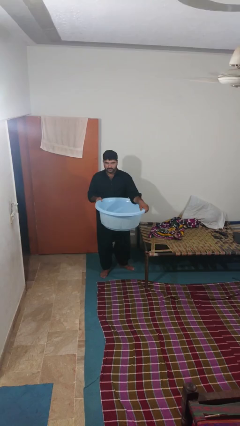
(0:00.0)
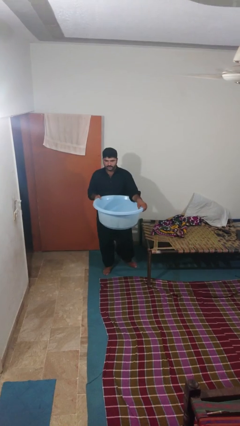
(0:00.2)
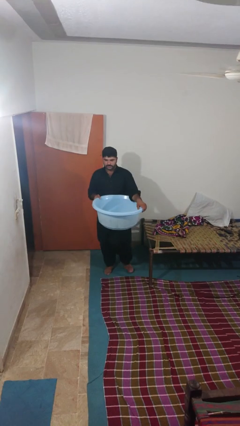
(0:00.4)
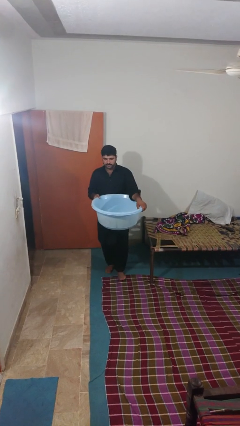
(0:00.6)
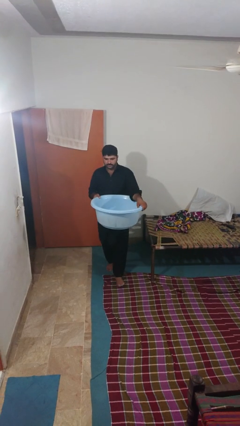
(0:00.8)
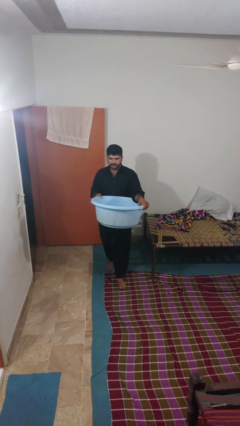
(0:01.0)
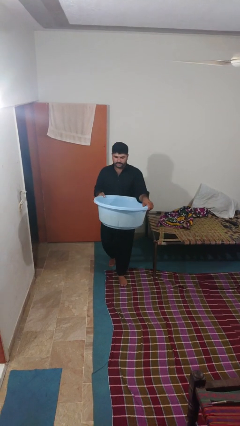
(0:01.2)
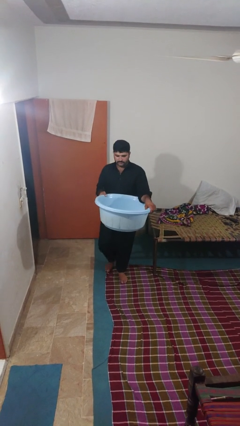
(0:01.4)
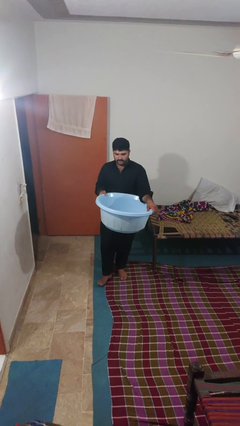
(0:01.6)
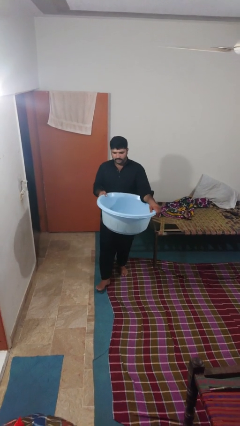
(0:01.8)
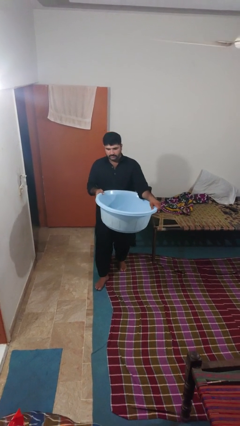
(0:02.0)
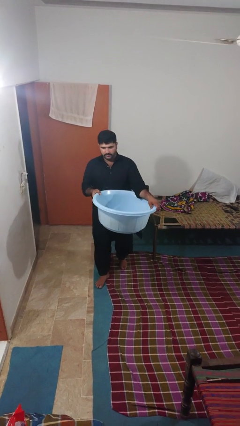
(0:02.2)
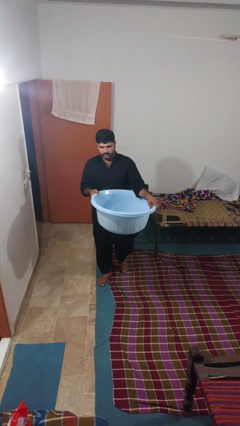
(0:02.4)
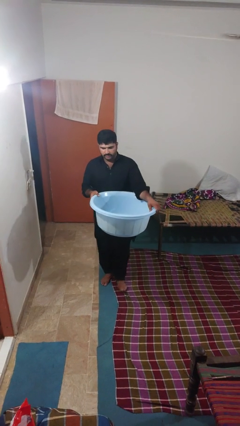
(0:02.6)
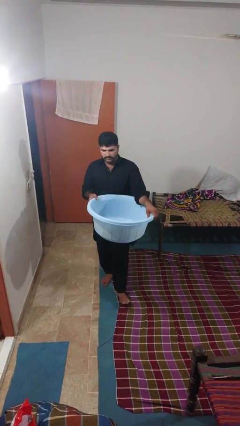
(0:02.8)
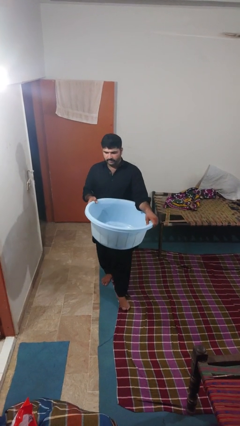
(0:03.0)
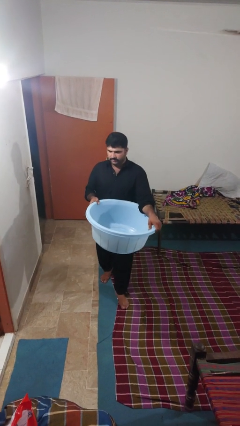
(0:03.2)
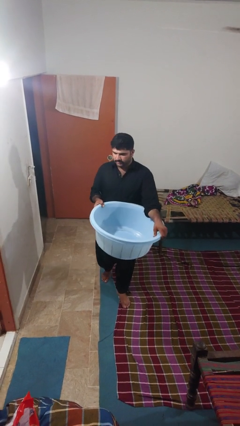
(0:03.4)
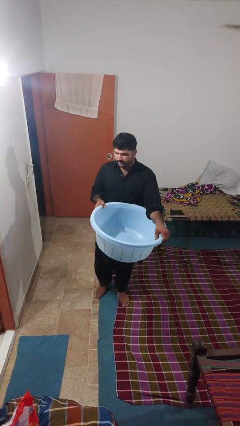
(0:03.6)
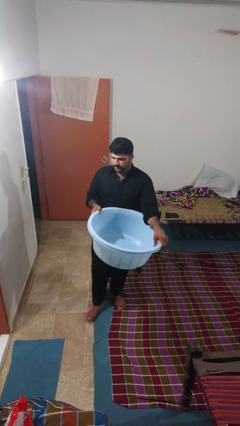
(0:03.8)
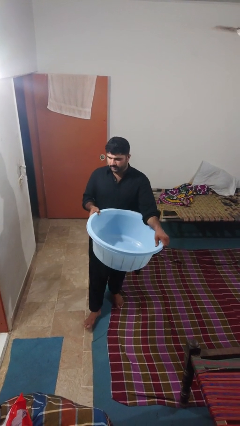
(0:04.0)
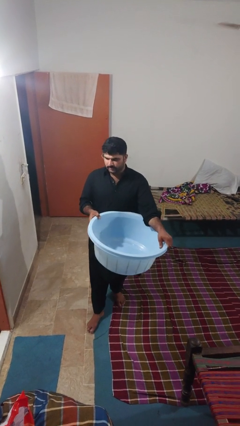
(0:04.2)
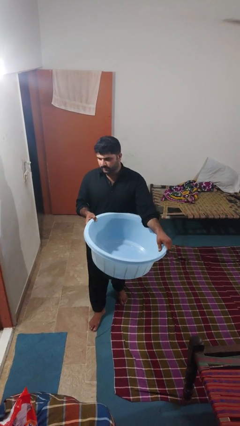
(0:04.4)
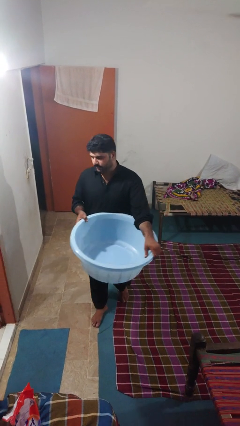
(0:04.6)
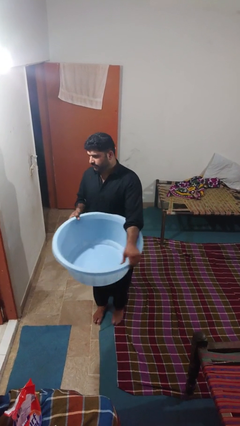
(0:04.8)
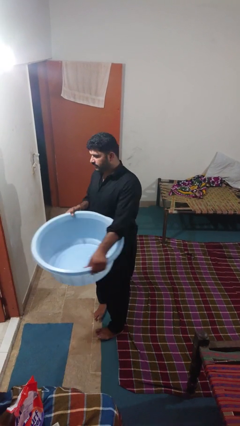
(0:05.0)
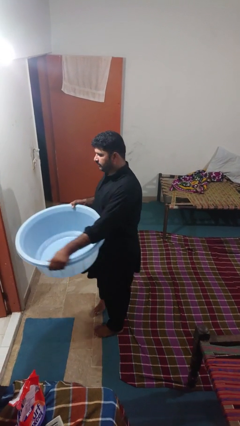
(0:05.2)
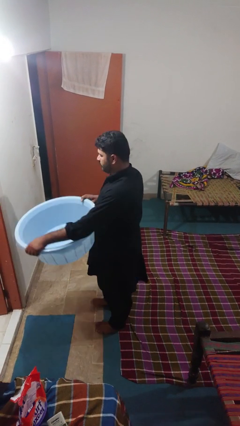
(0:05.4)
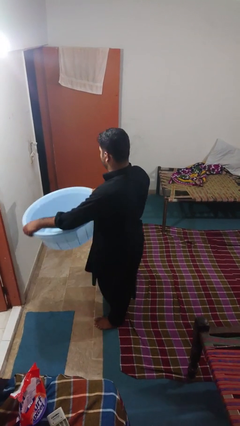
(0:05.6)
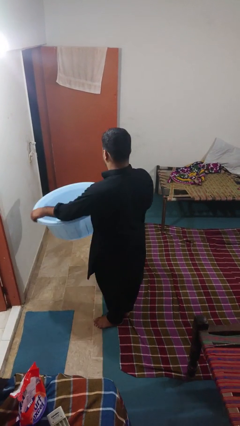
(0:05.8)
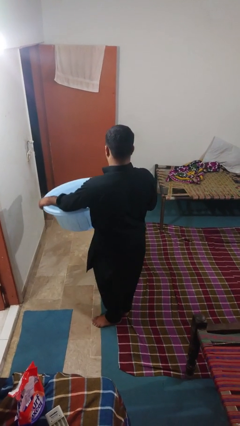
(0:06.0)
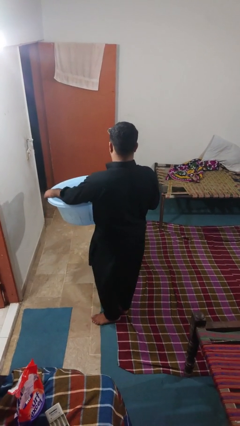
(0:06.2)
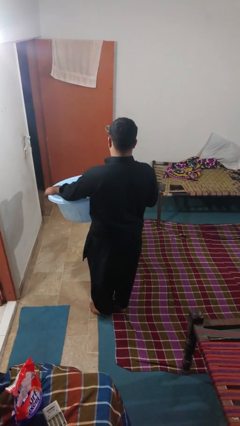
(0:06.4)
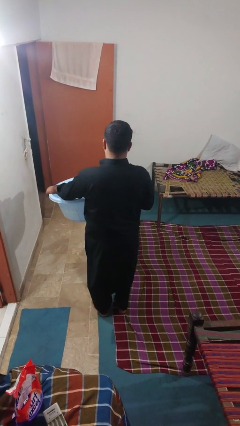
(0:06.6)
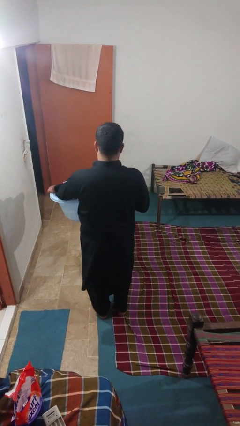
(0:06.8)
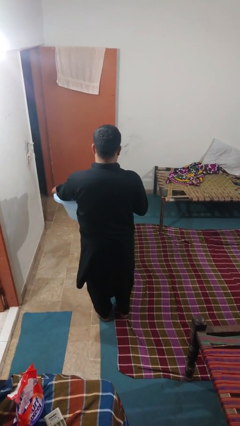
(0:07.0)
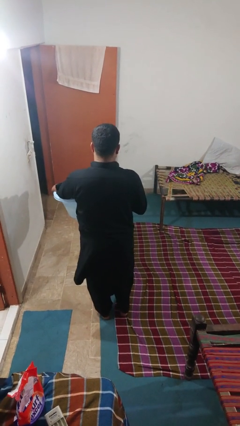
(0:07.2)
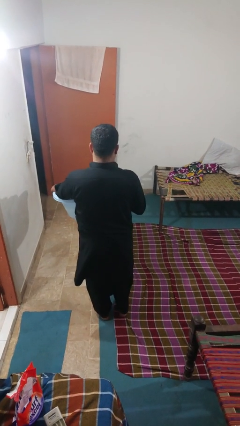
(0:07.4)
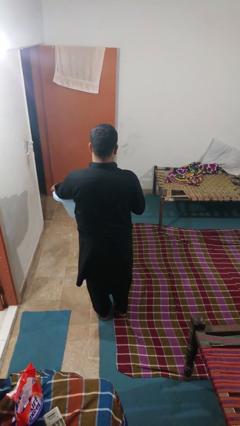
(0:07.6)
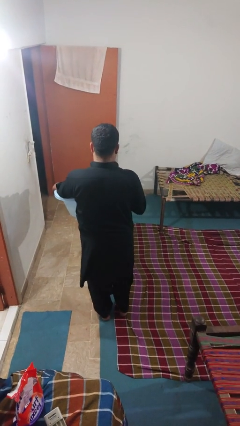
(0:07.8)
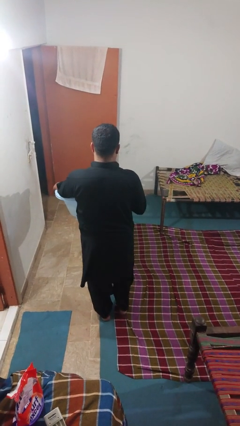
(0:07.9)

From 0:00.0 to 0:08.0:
person carries furniture

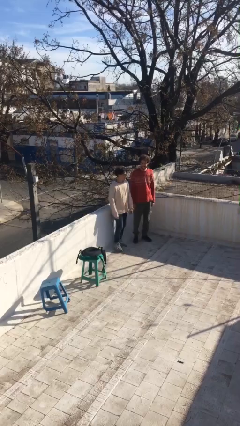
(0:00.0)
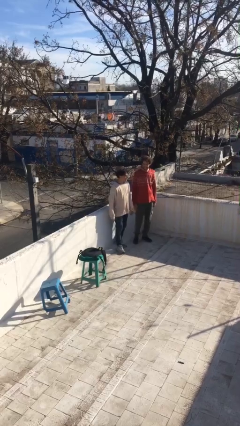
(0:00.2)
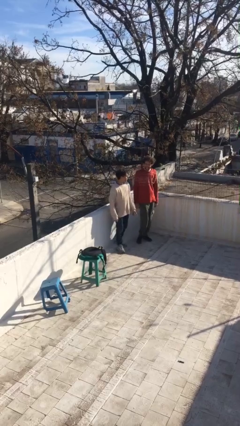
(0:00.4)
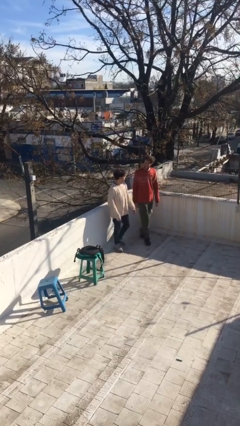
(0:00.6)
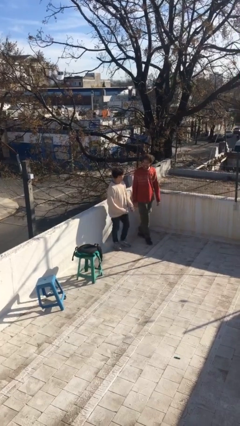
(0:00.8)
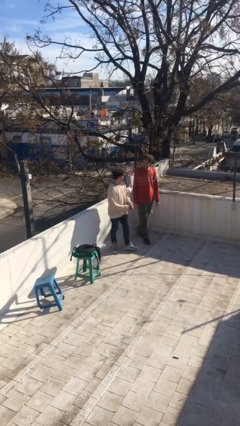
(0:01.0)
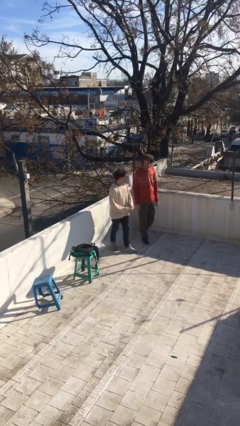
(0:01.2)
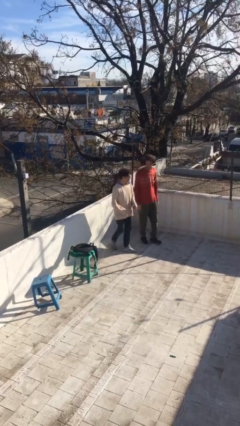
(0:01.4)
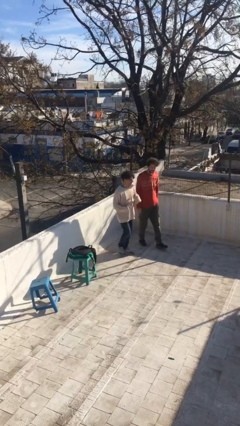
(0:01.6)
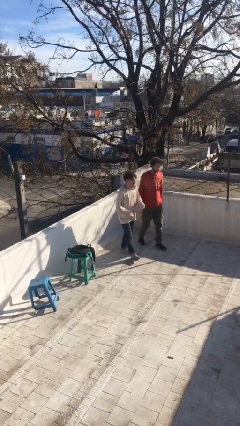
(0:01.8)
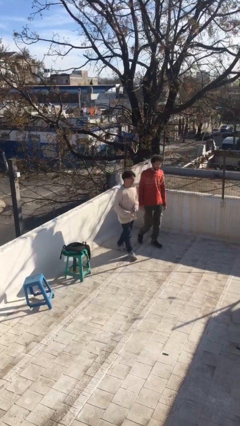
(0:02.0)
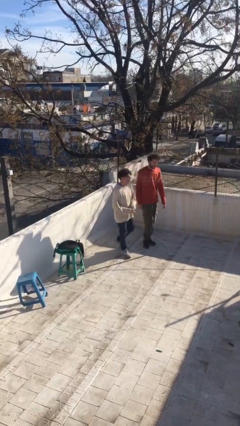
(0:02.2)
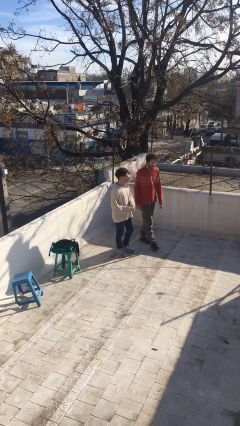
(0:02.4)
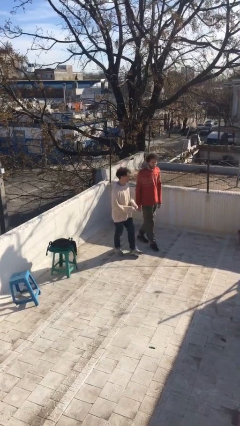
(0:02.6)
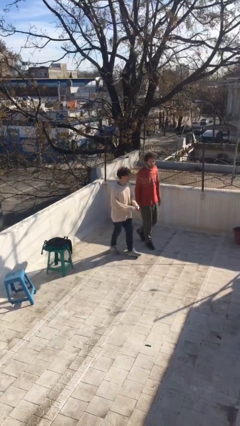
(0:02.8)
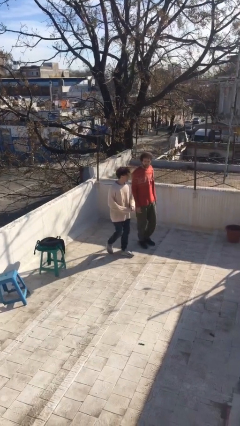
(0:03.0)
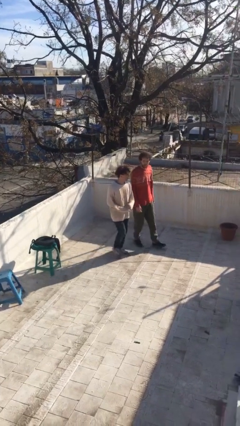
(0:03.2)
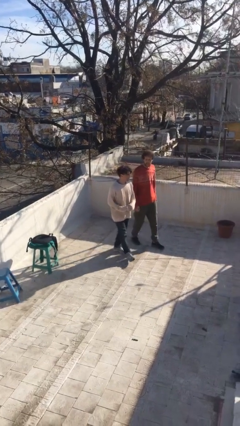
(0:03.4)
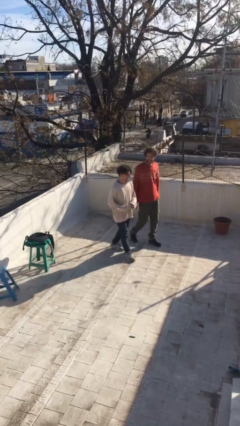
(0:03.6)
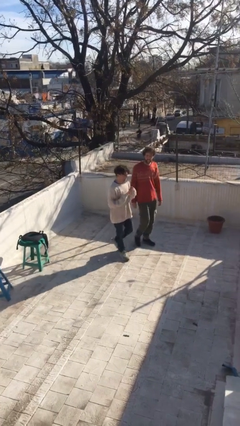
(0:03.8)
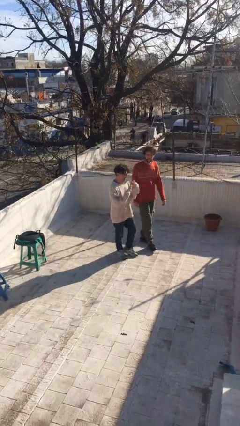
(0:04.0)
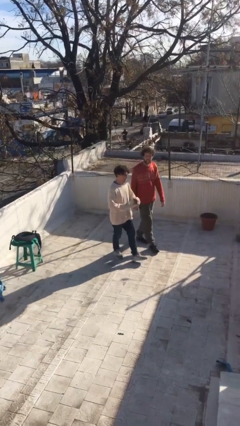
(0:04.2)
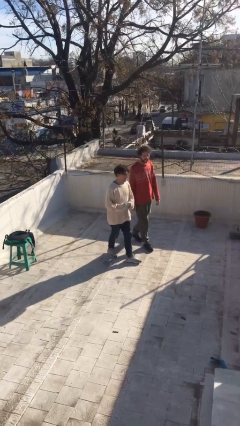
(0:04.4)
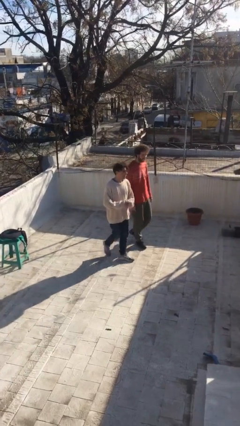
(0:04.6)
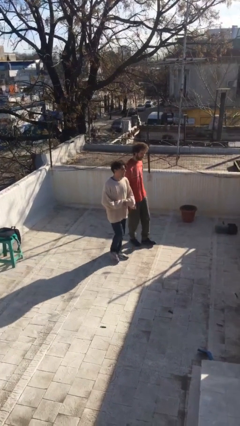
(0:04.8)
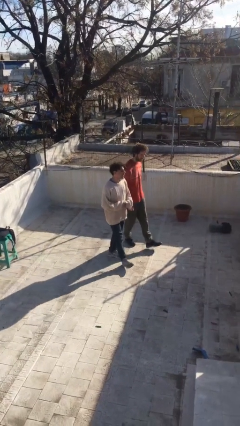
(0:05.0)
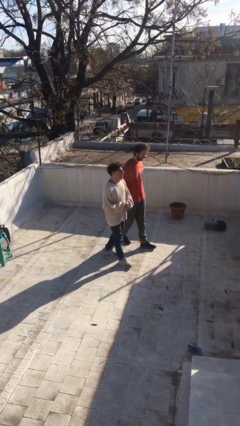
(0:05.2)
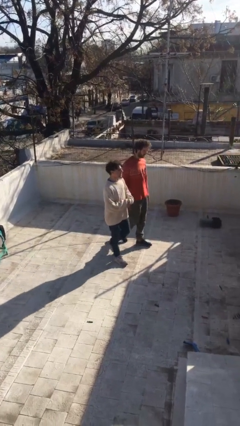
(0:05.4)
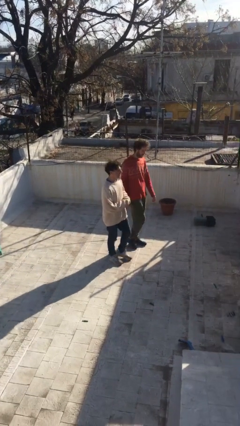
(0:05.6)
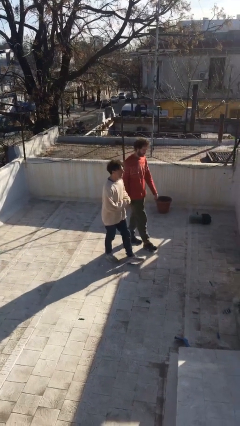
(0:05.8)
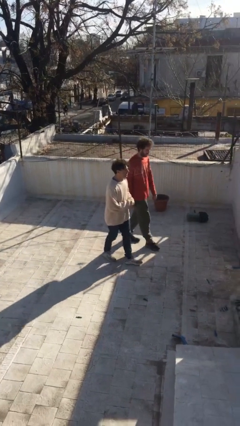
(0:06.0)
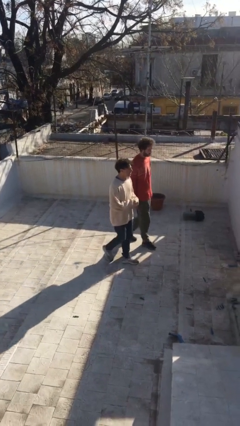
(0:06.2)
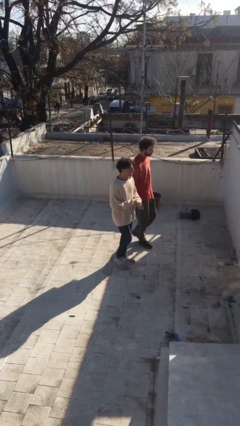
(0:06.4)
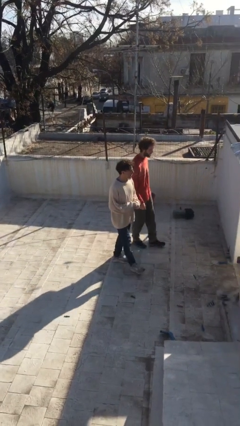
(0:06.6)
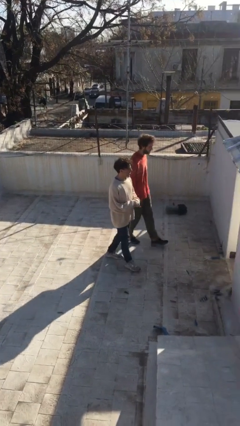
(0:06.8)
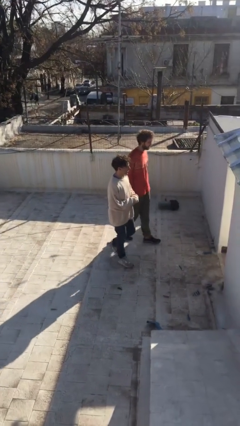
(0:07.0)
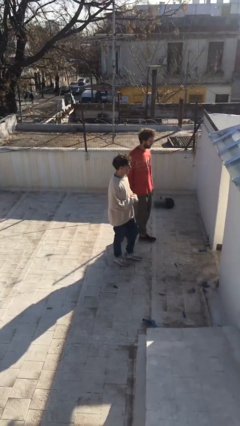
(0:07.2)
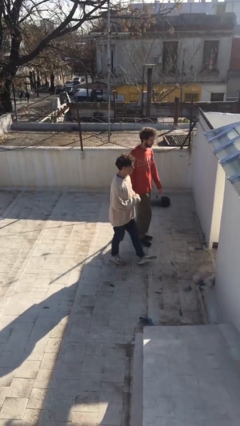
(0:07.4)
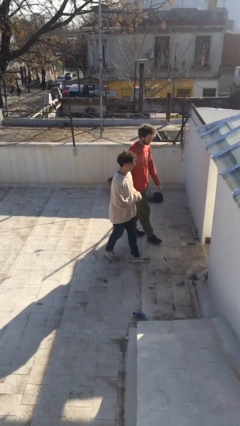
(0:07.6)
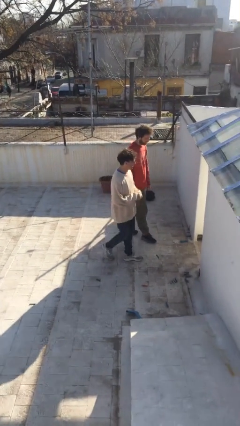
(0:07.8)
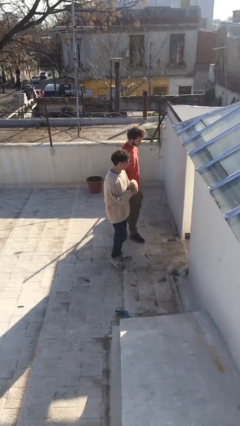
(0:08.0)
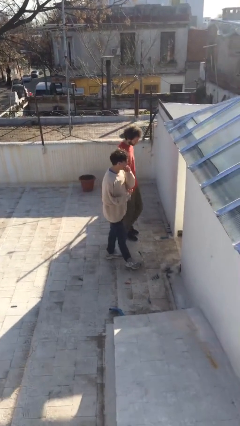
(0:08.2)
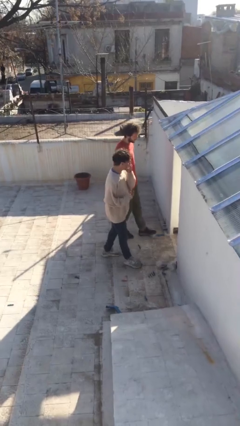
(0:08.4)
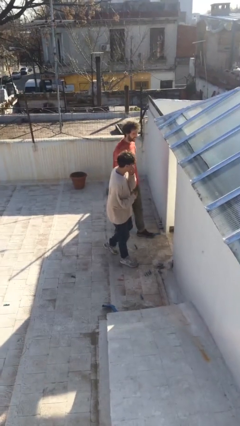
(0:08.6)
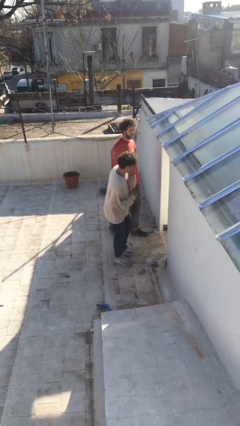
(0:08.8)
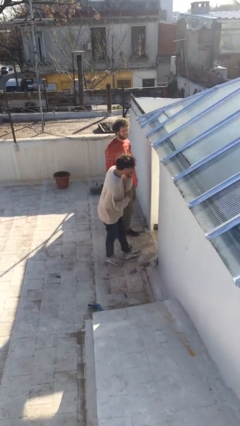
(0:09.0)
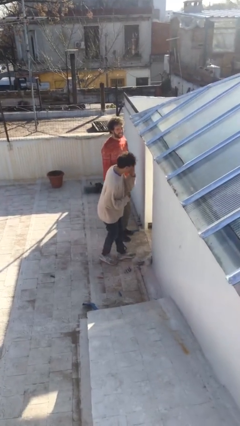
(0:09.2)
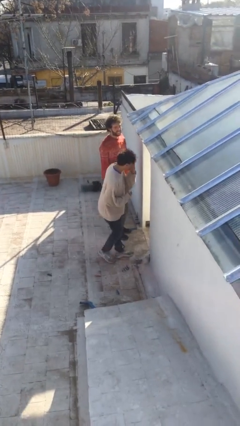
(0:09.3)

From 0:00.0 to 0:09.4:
person talks to person

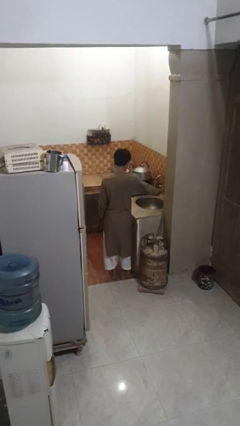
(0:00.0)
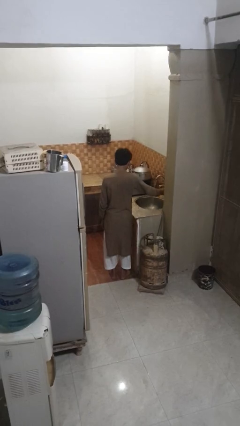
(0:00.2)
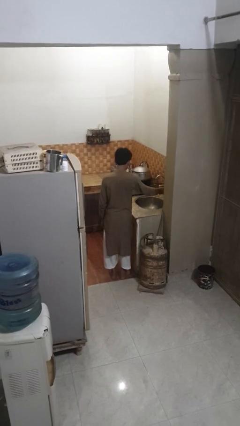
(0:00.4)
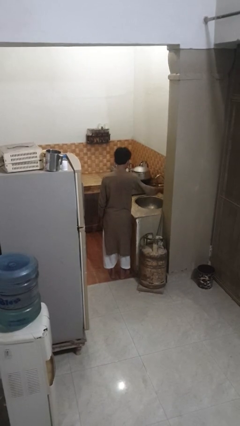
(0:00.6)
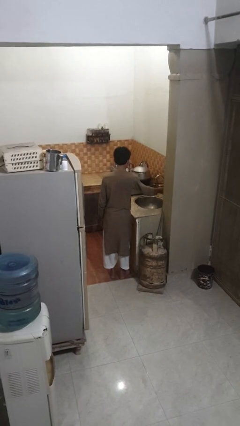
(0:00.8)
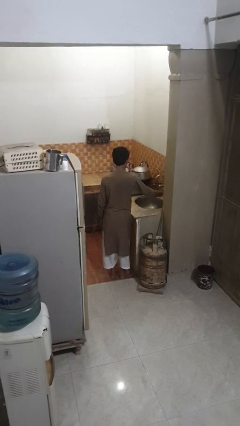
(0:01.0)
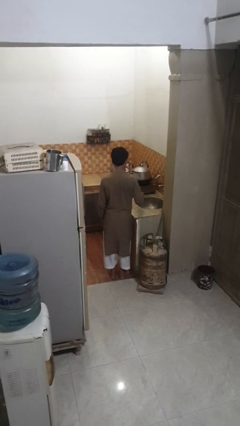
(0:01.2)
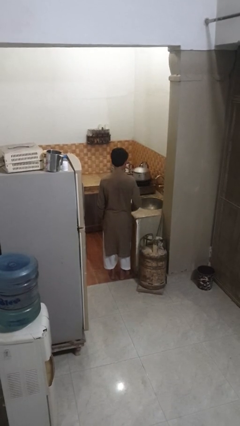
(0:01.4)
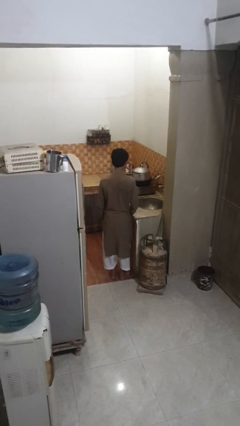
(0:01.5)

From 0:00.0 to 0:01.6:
person turns off faucet
